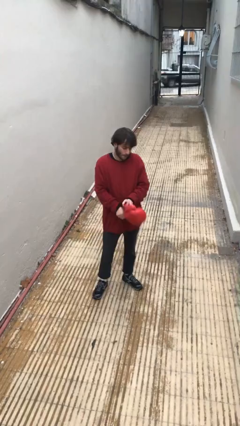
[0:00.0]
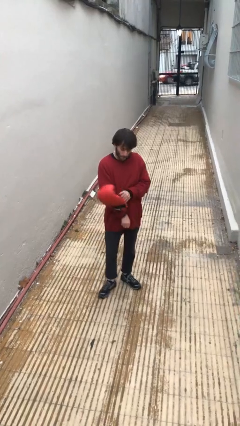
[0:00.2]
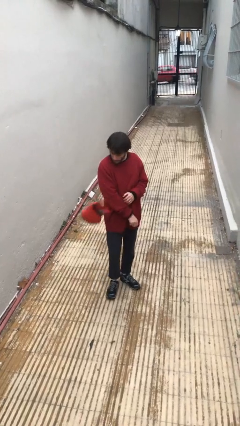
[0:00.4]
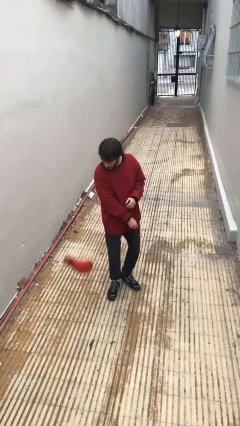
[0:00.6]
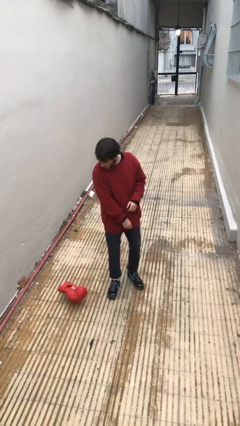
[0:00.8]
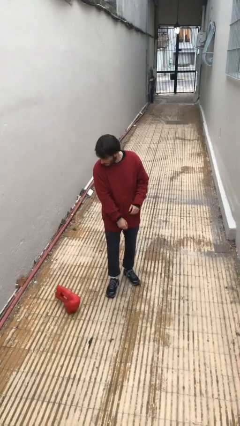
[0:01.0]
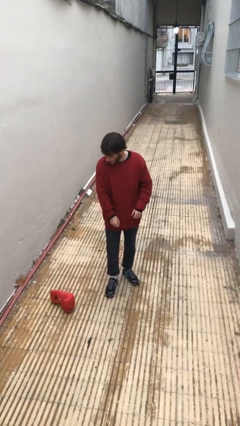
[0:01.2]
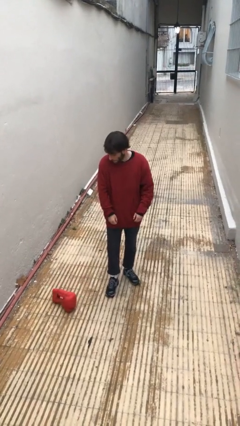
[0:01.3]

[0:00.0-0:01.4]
person drops object

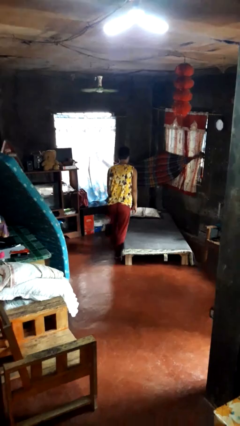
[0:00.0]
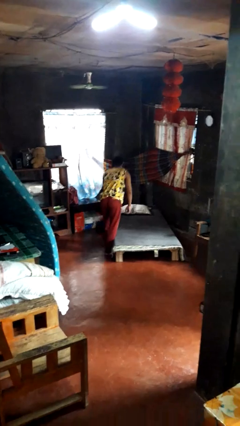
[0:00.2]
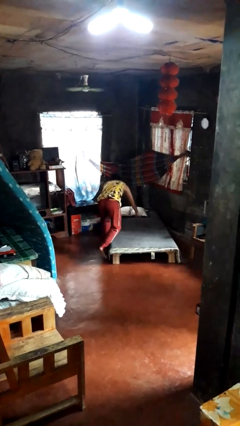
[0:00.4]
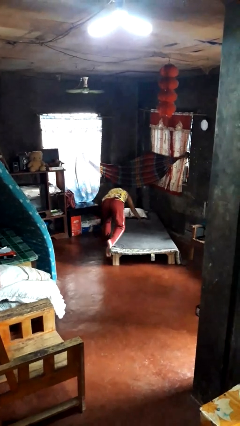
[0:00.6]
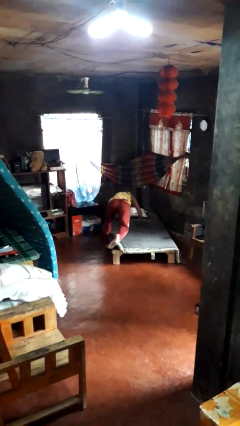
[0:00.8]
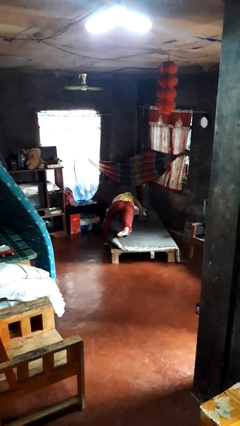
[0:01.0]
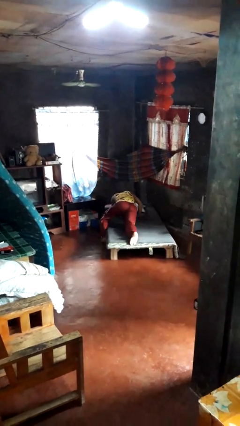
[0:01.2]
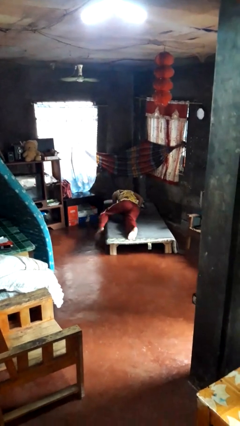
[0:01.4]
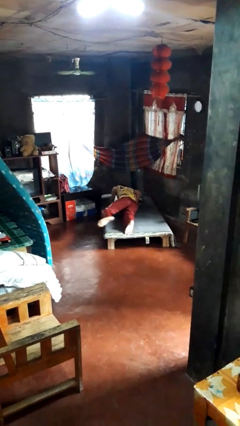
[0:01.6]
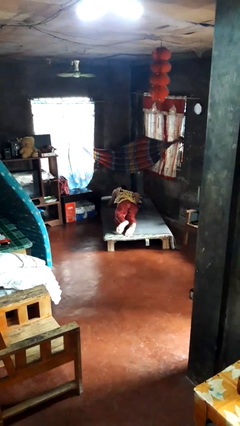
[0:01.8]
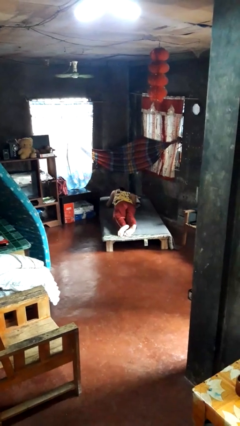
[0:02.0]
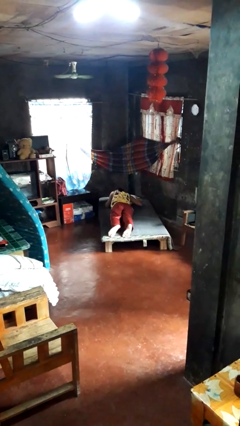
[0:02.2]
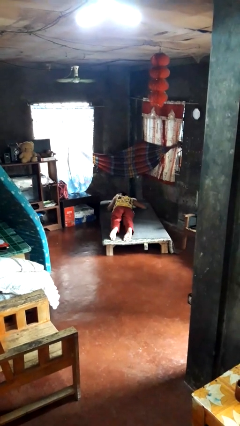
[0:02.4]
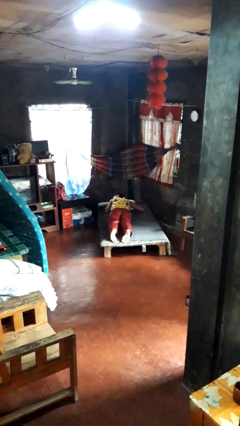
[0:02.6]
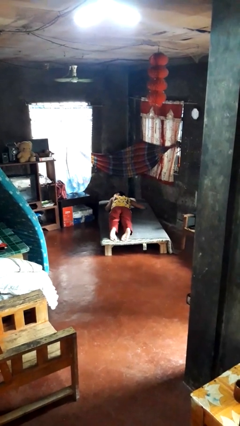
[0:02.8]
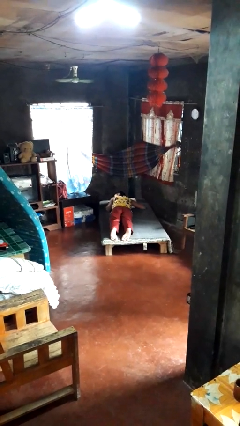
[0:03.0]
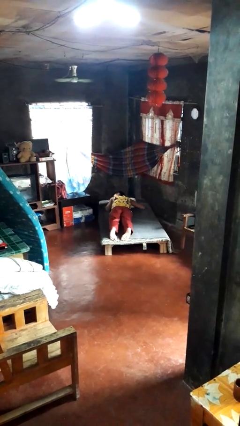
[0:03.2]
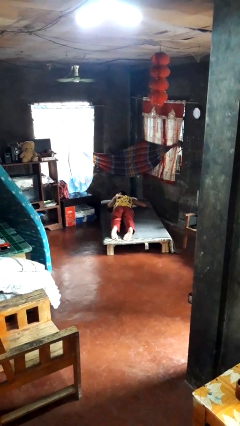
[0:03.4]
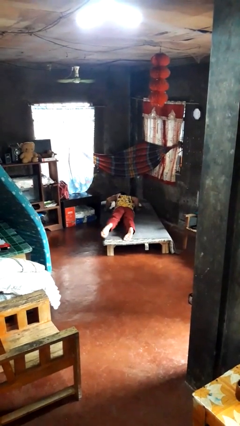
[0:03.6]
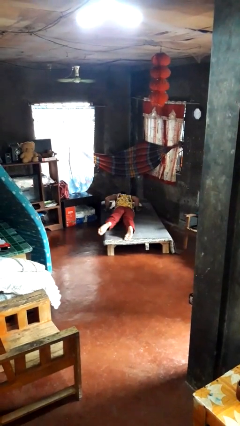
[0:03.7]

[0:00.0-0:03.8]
person lies down on bed

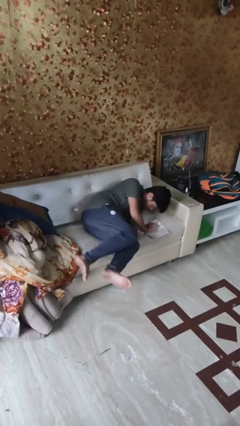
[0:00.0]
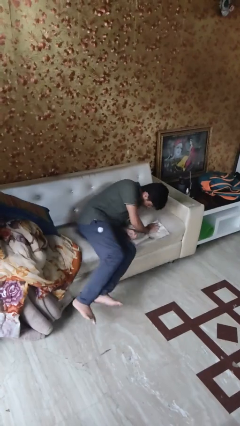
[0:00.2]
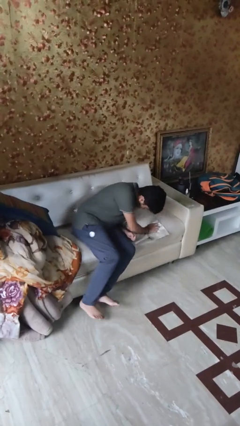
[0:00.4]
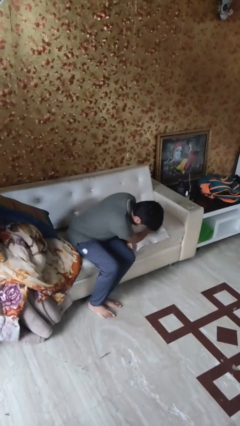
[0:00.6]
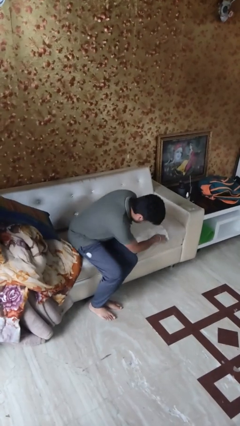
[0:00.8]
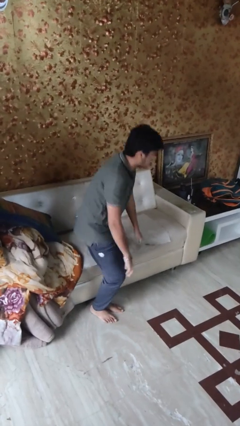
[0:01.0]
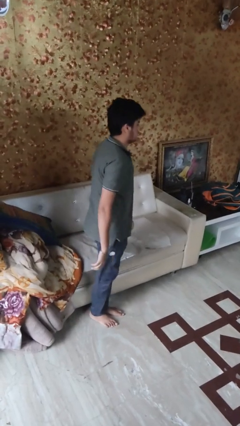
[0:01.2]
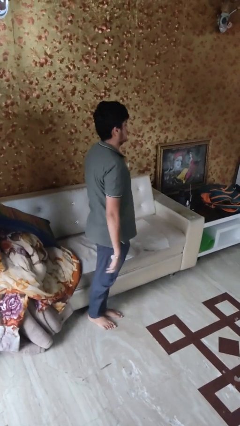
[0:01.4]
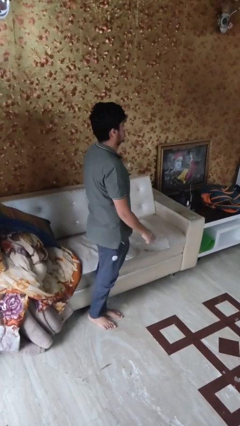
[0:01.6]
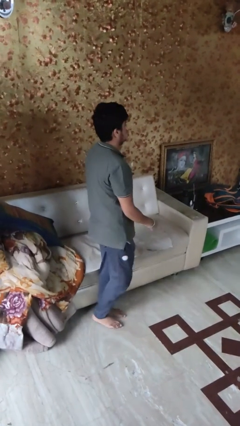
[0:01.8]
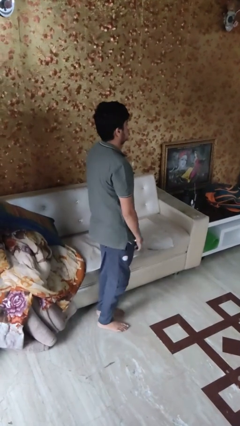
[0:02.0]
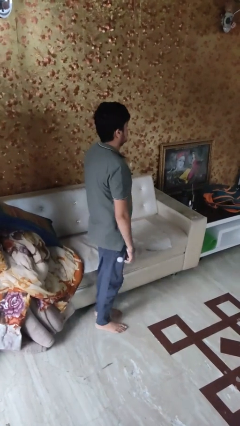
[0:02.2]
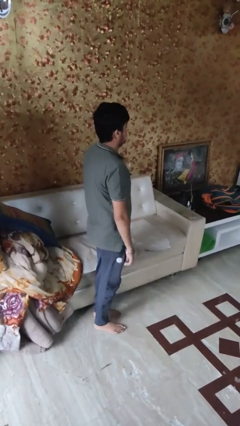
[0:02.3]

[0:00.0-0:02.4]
person stands up

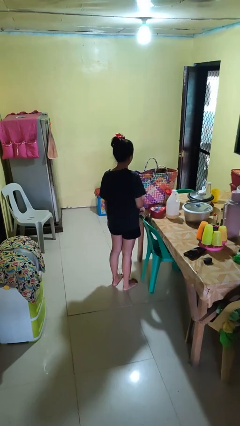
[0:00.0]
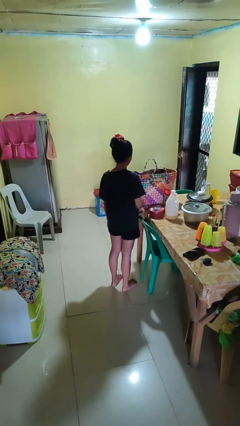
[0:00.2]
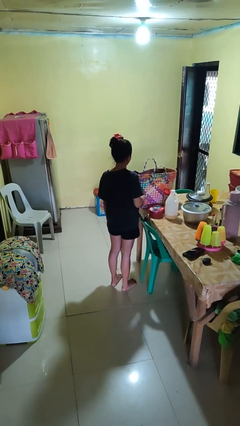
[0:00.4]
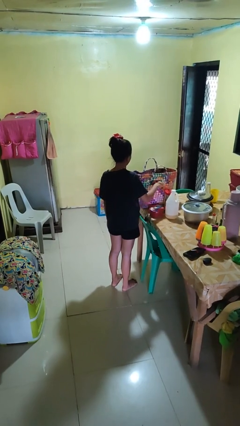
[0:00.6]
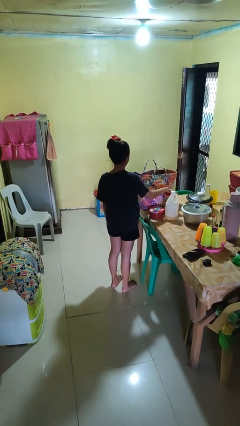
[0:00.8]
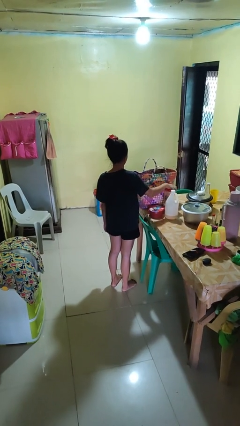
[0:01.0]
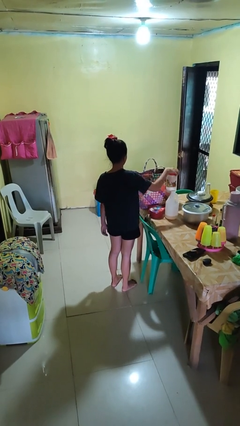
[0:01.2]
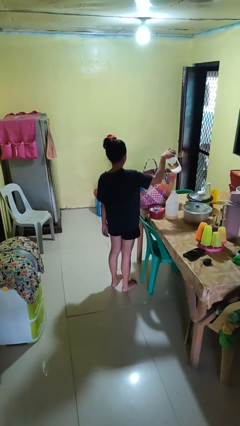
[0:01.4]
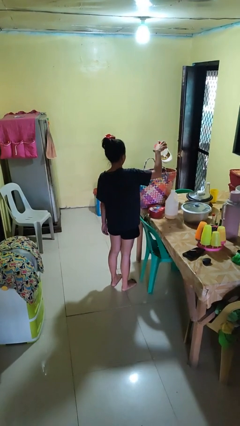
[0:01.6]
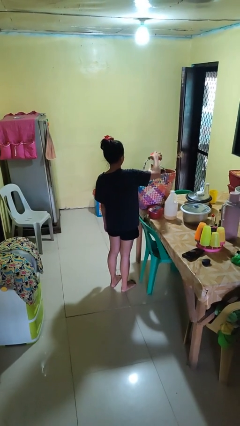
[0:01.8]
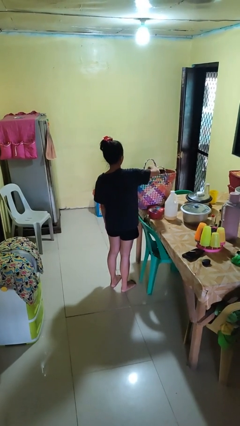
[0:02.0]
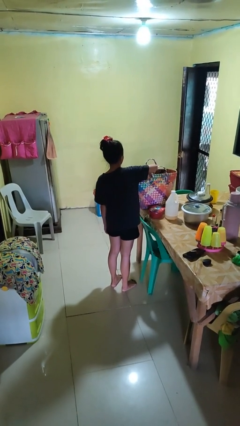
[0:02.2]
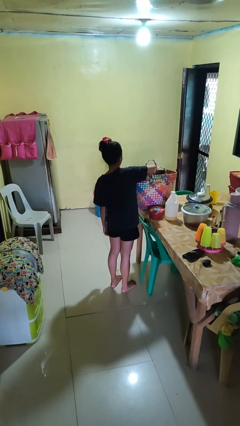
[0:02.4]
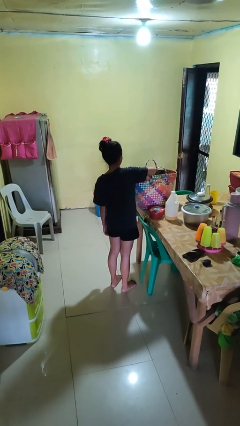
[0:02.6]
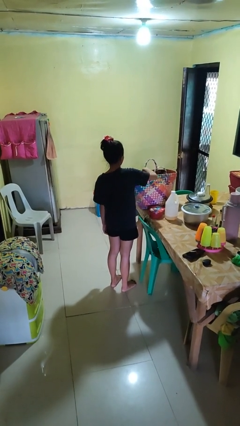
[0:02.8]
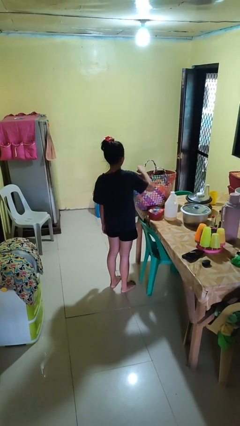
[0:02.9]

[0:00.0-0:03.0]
person puts object into basket

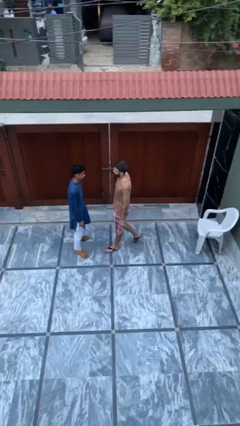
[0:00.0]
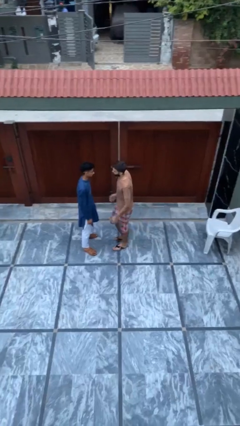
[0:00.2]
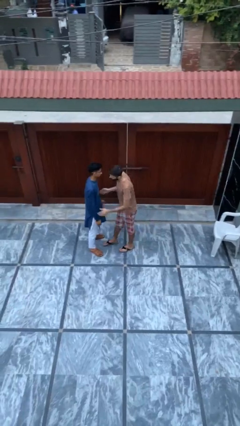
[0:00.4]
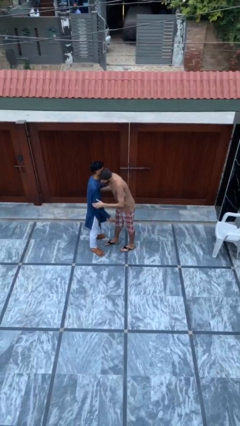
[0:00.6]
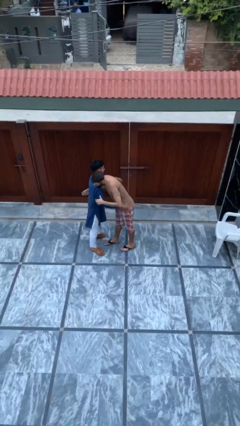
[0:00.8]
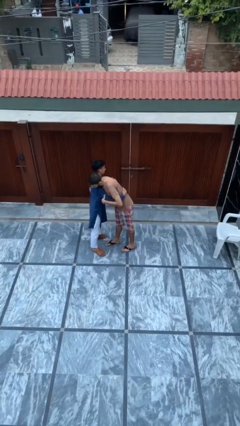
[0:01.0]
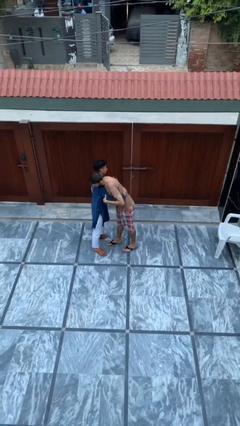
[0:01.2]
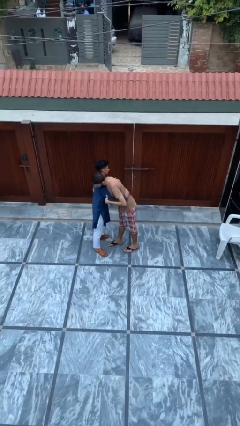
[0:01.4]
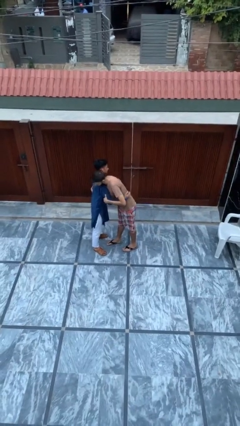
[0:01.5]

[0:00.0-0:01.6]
person embraces person

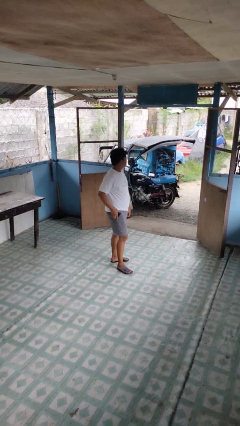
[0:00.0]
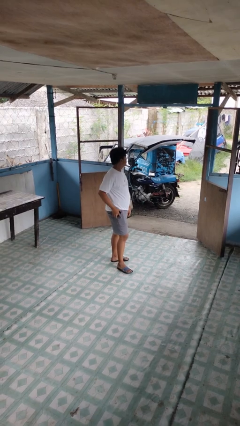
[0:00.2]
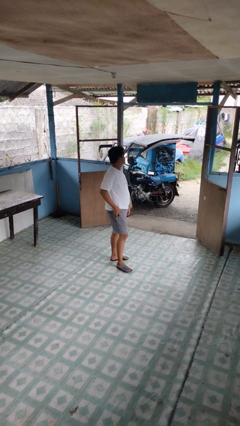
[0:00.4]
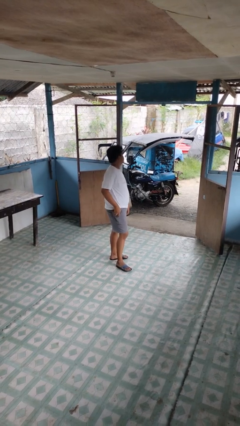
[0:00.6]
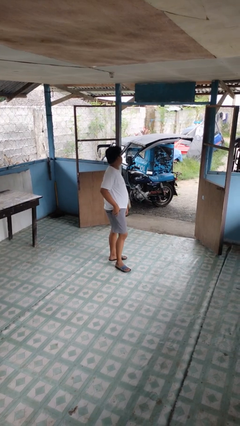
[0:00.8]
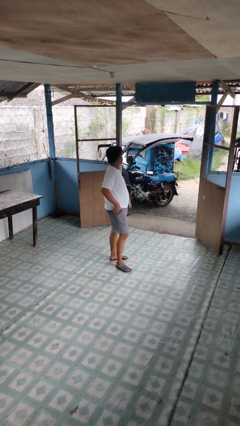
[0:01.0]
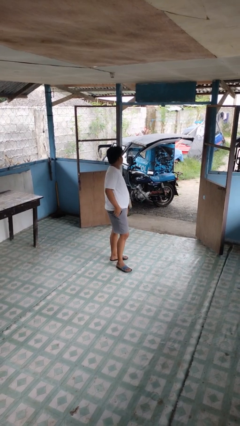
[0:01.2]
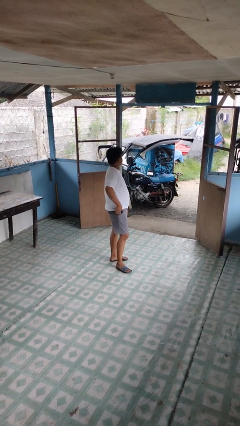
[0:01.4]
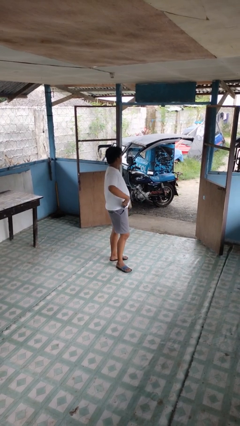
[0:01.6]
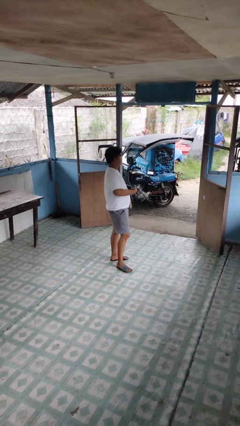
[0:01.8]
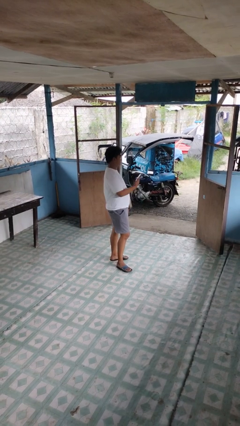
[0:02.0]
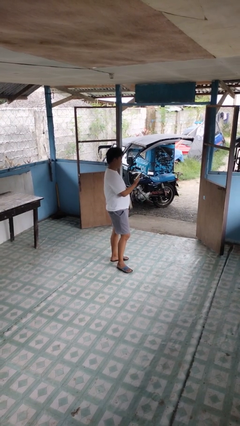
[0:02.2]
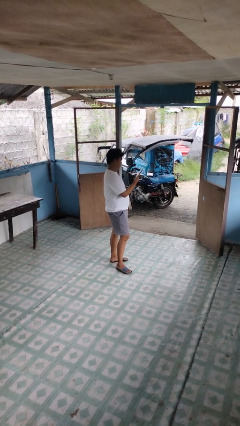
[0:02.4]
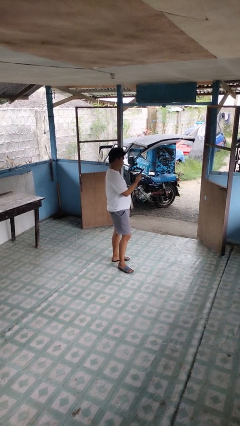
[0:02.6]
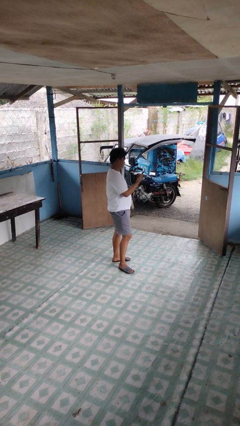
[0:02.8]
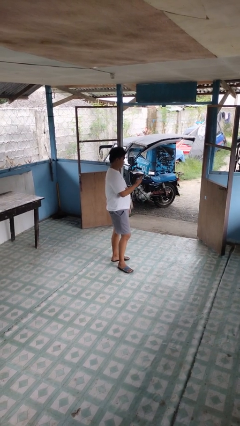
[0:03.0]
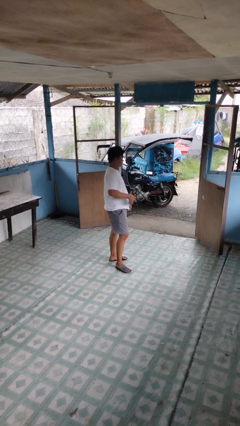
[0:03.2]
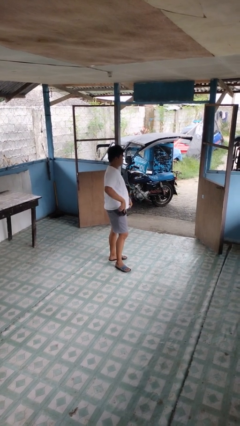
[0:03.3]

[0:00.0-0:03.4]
person takes phone from pocket

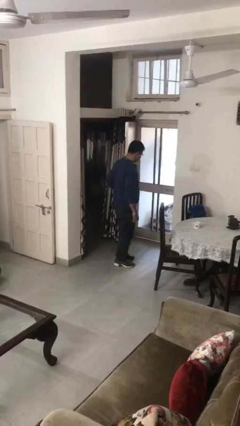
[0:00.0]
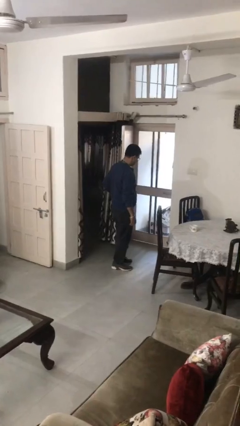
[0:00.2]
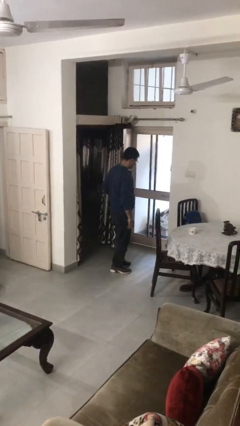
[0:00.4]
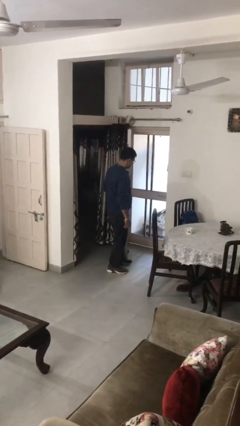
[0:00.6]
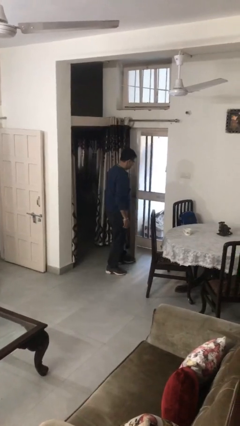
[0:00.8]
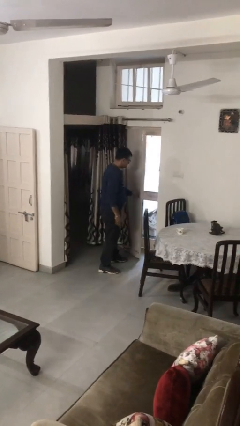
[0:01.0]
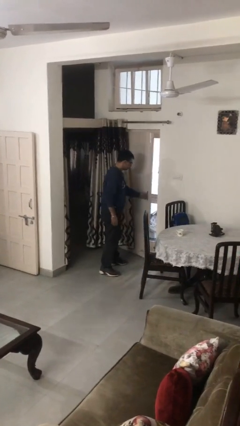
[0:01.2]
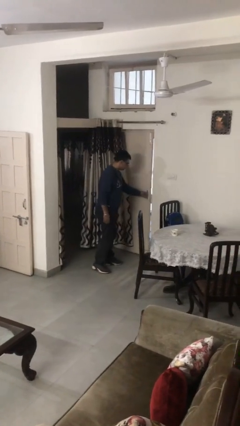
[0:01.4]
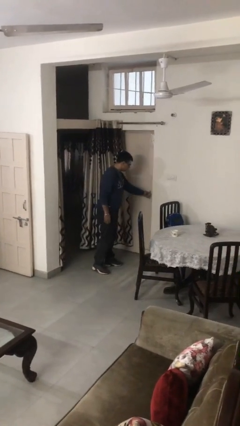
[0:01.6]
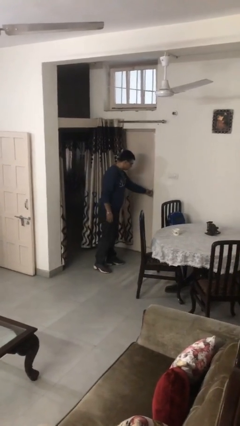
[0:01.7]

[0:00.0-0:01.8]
person closes facility door

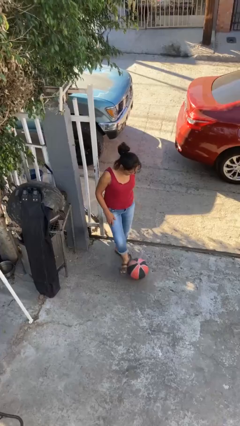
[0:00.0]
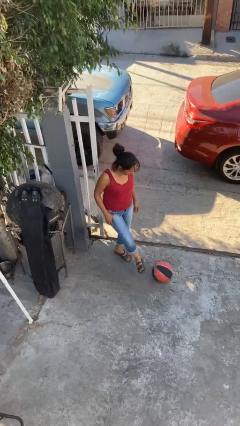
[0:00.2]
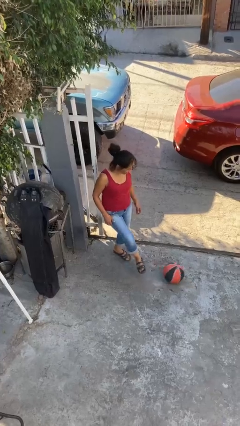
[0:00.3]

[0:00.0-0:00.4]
person kicks object to person
